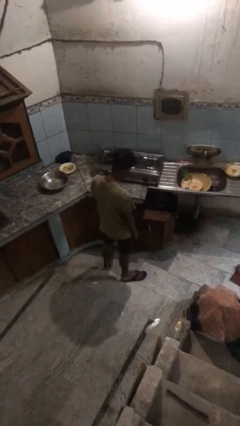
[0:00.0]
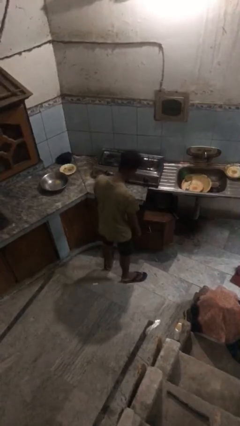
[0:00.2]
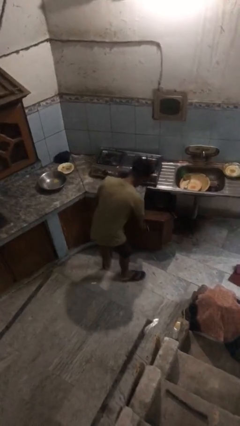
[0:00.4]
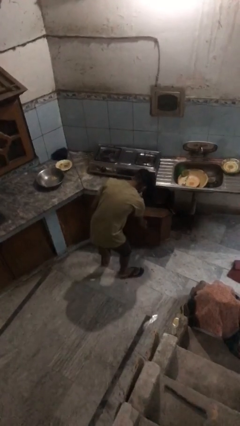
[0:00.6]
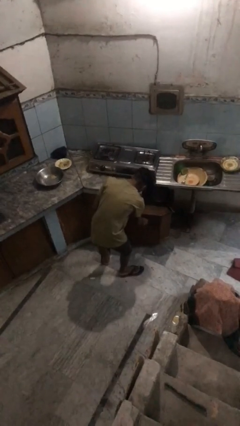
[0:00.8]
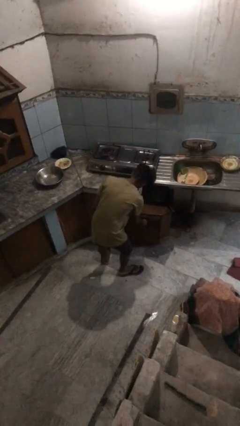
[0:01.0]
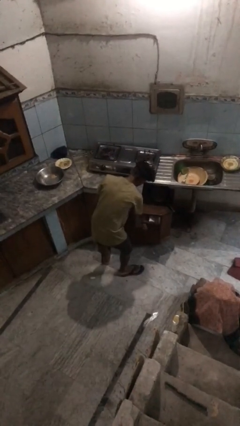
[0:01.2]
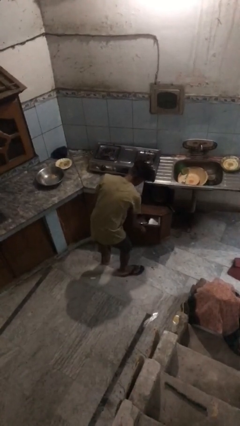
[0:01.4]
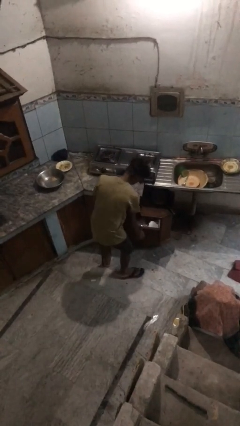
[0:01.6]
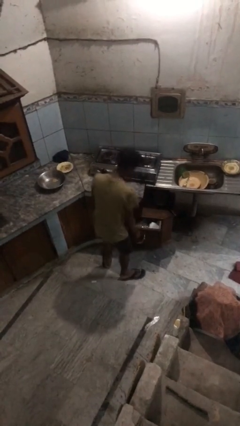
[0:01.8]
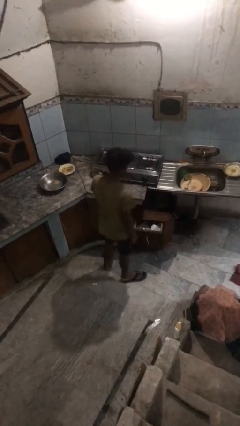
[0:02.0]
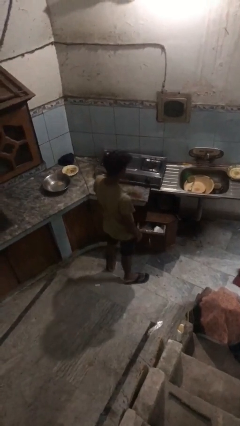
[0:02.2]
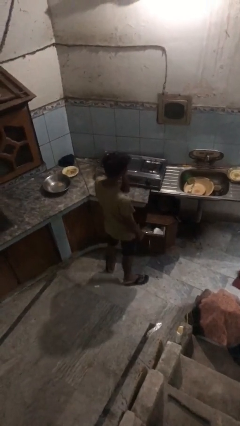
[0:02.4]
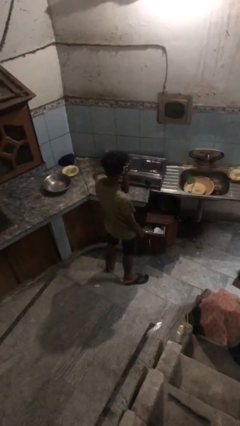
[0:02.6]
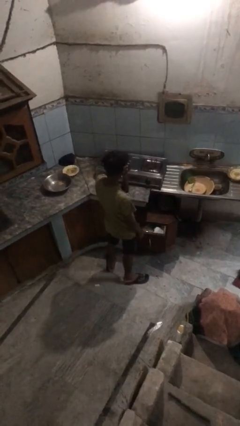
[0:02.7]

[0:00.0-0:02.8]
person opens kitchen drawer

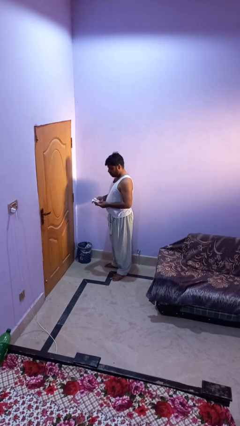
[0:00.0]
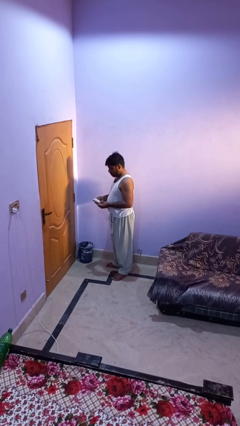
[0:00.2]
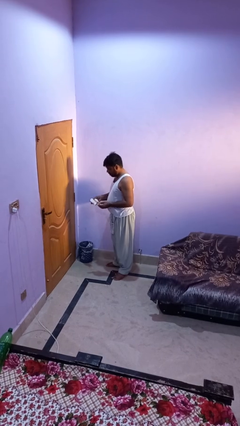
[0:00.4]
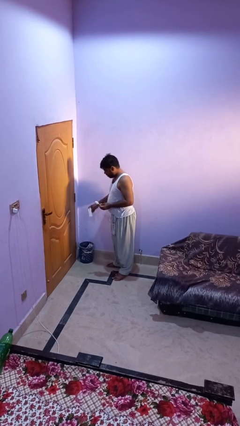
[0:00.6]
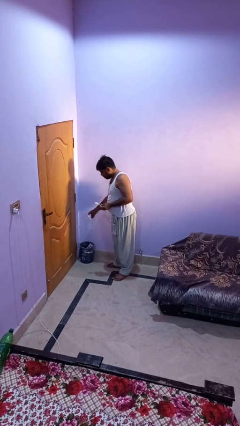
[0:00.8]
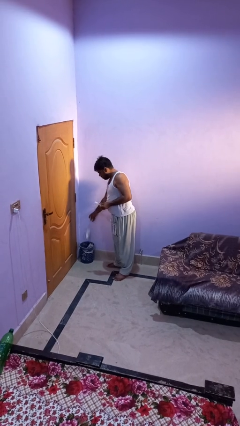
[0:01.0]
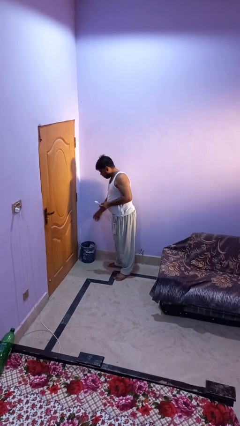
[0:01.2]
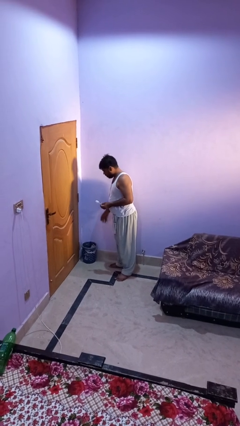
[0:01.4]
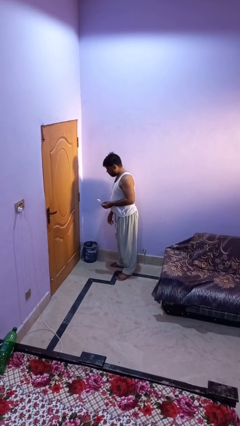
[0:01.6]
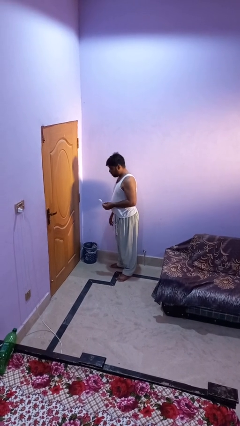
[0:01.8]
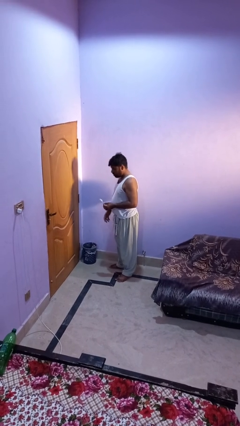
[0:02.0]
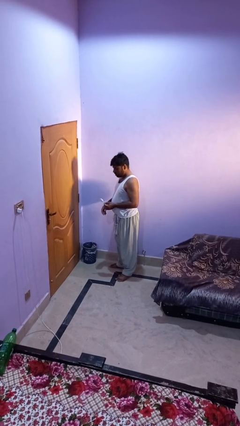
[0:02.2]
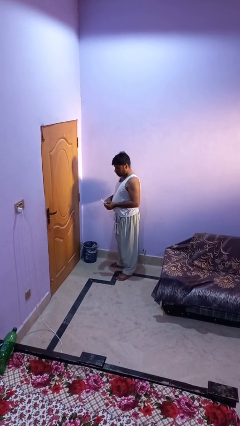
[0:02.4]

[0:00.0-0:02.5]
person discards trash

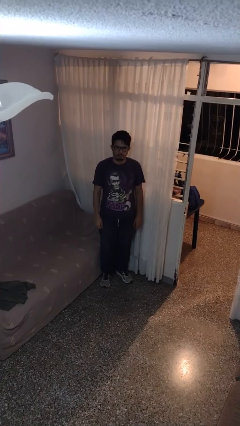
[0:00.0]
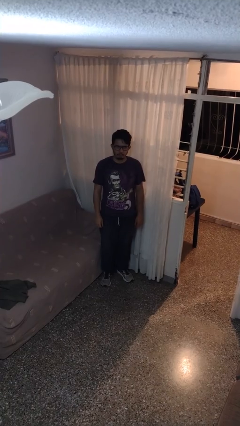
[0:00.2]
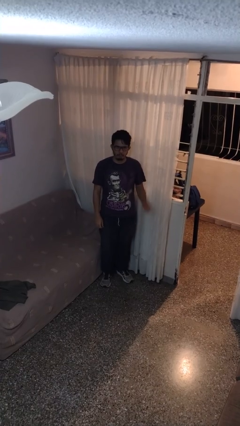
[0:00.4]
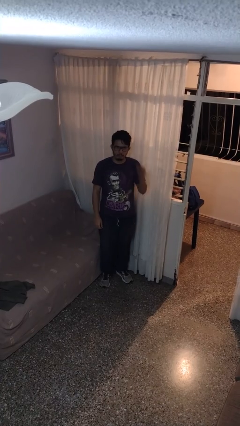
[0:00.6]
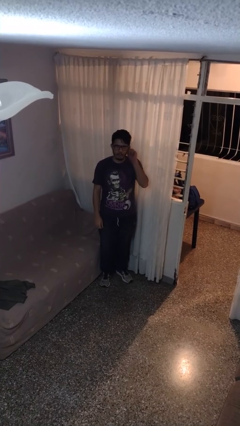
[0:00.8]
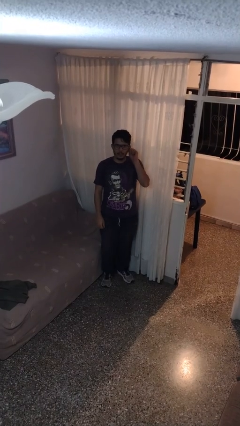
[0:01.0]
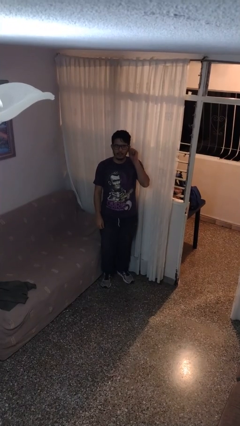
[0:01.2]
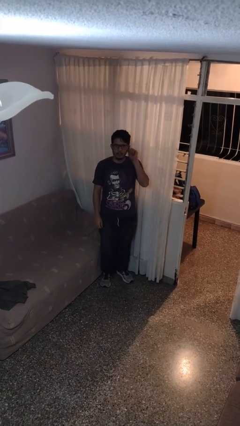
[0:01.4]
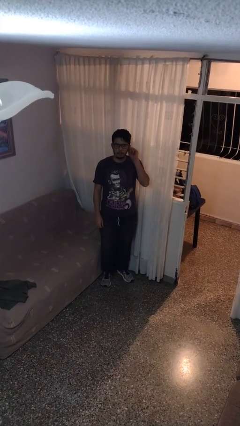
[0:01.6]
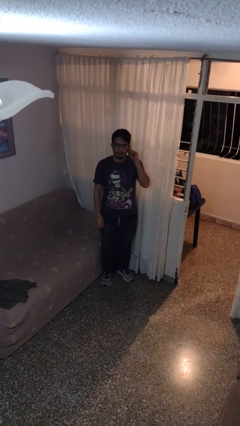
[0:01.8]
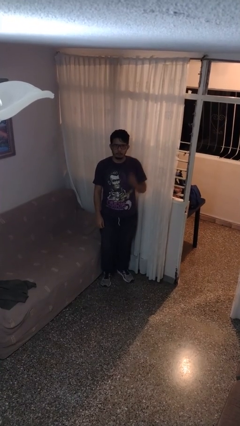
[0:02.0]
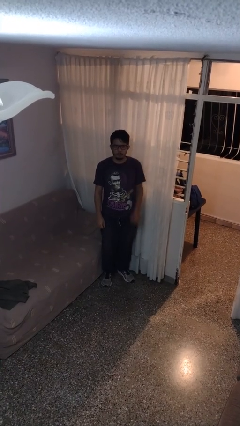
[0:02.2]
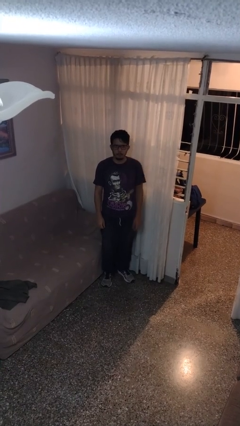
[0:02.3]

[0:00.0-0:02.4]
person touches earlobe

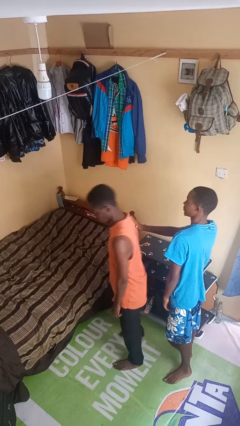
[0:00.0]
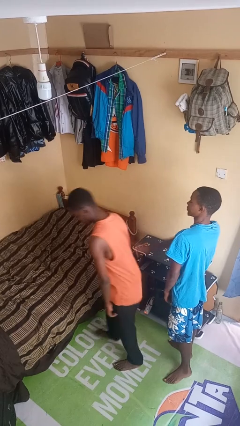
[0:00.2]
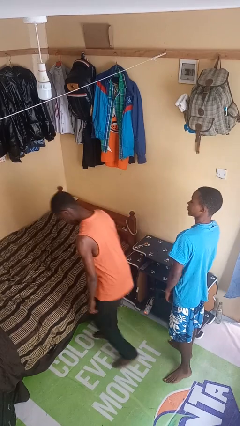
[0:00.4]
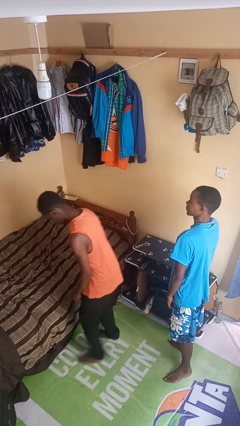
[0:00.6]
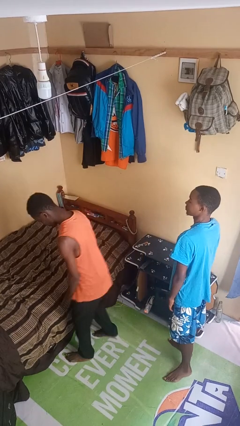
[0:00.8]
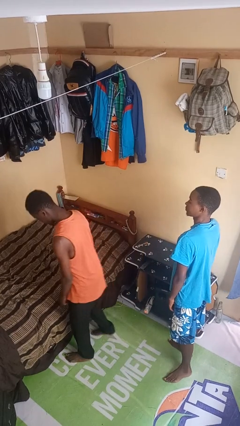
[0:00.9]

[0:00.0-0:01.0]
person shoves person

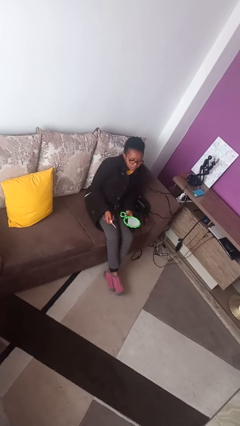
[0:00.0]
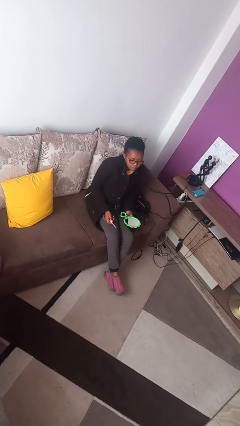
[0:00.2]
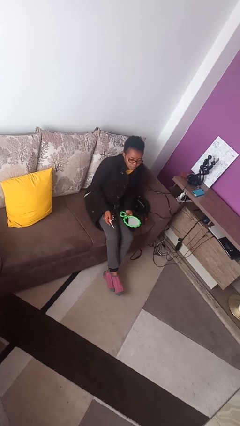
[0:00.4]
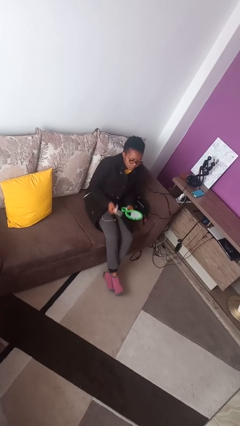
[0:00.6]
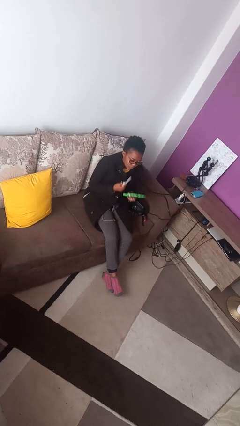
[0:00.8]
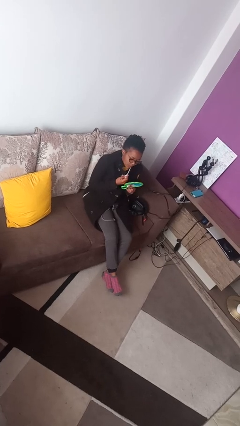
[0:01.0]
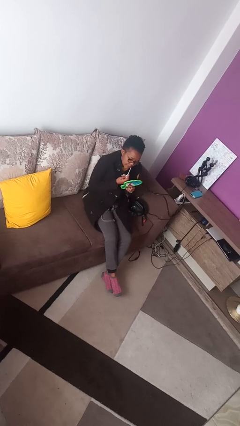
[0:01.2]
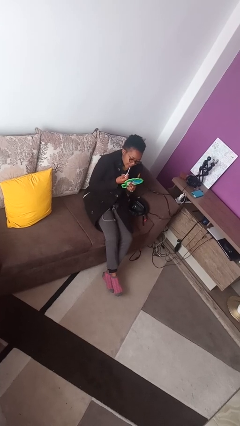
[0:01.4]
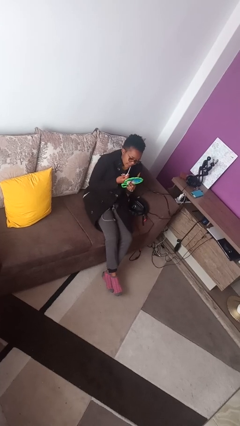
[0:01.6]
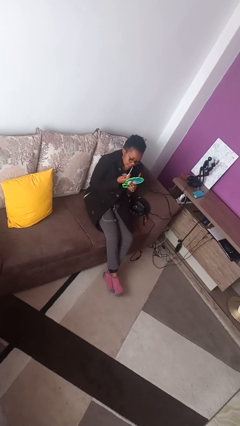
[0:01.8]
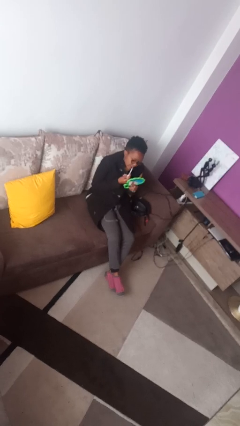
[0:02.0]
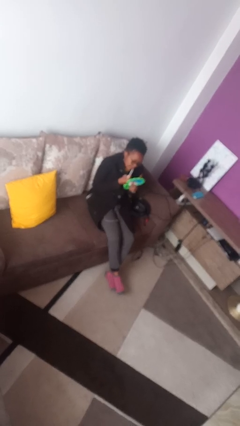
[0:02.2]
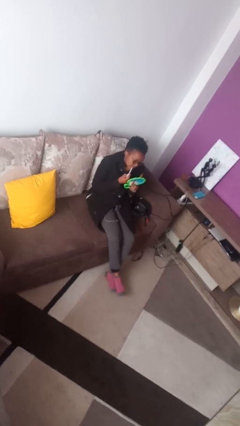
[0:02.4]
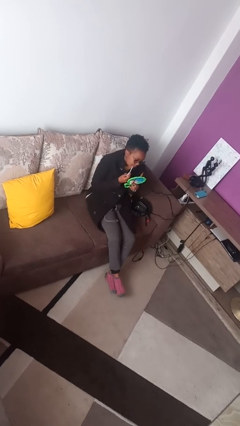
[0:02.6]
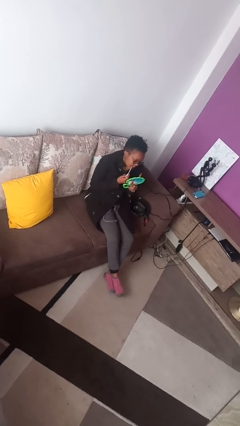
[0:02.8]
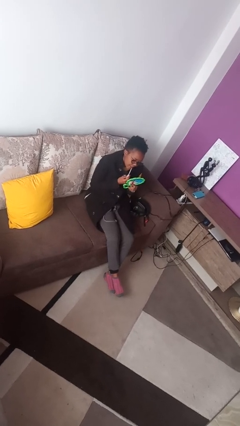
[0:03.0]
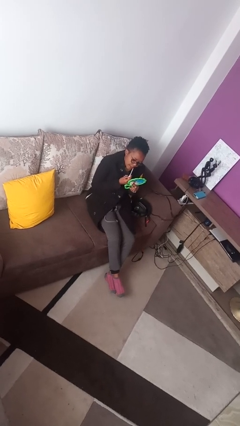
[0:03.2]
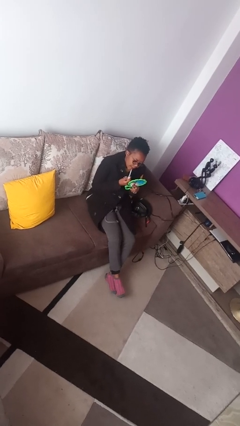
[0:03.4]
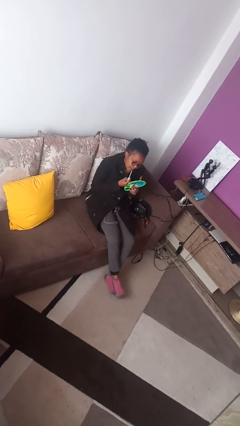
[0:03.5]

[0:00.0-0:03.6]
person applies lip makeup

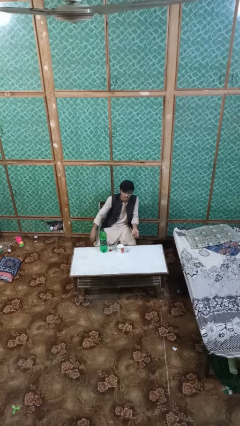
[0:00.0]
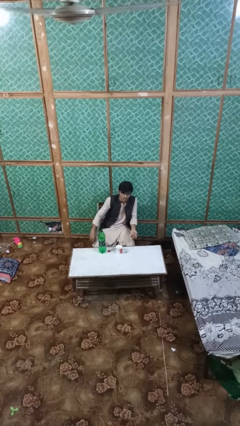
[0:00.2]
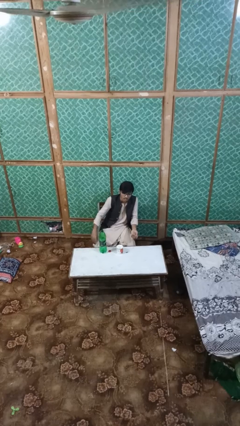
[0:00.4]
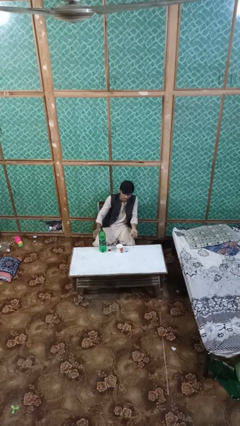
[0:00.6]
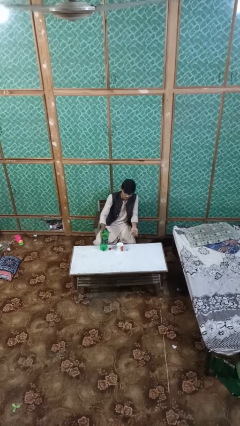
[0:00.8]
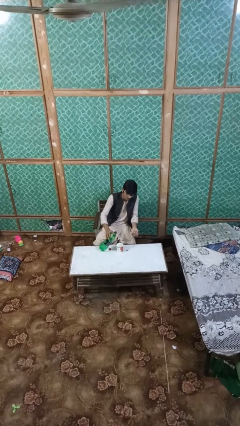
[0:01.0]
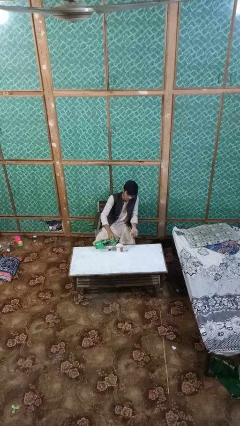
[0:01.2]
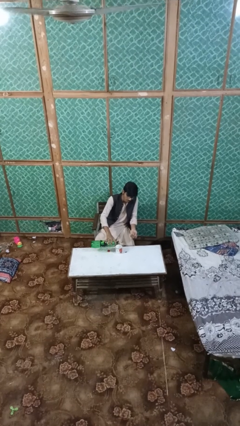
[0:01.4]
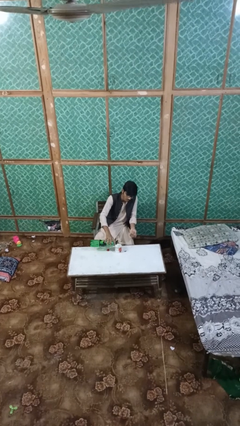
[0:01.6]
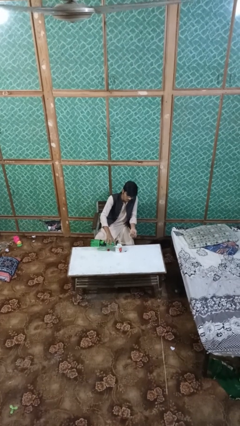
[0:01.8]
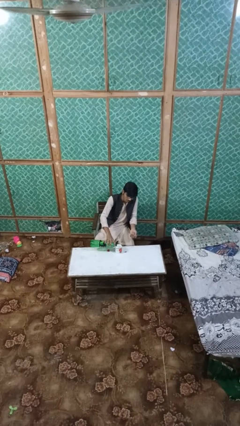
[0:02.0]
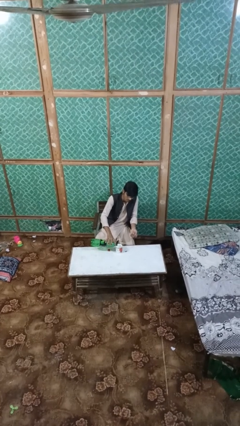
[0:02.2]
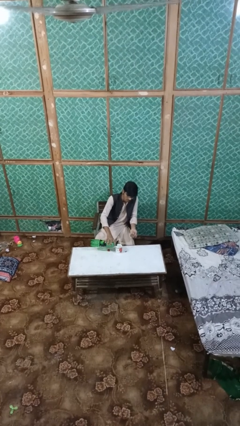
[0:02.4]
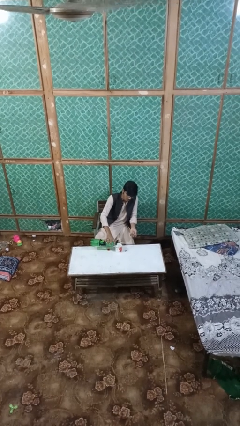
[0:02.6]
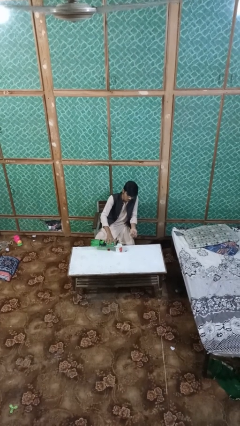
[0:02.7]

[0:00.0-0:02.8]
person pours liquid into cup

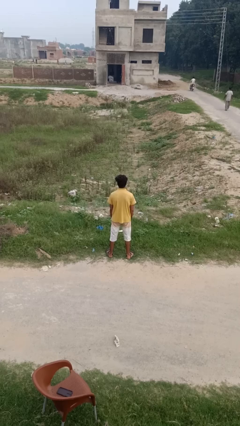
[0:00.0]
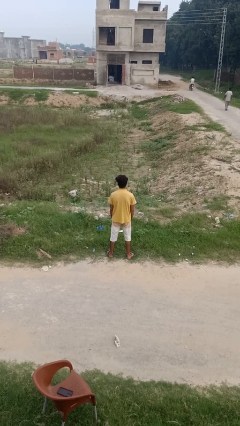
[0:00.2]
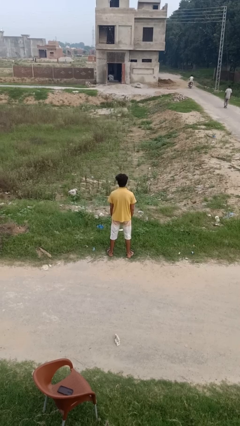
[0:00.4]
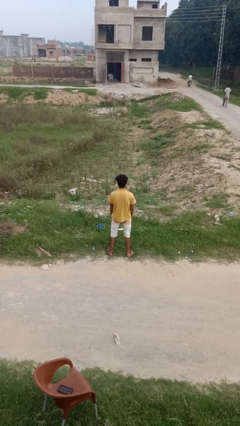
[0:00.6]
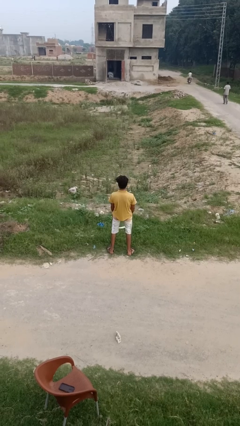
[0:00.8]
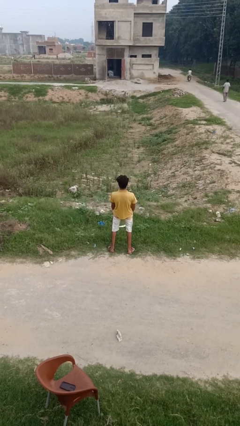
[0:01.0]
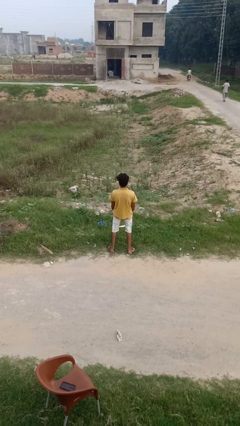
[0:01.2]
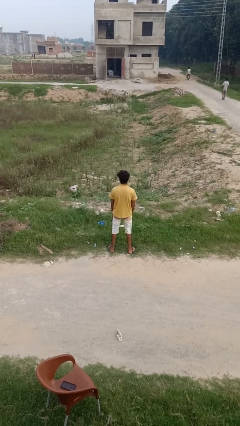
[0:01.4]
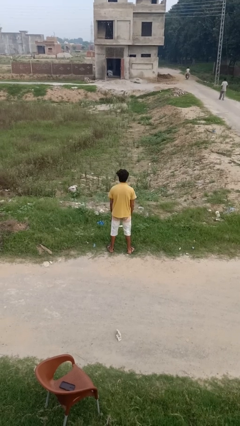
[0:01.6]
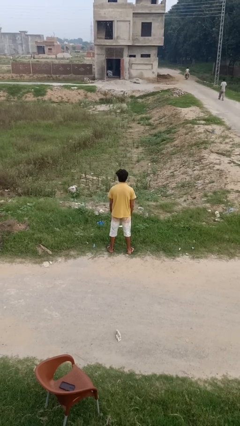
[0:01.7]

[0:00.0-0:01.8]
person wiggles hips

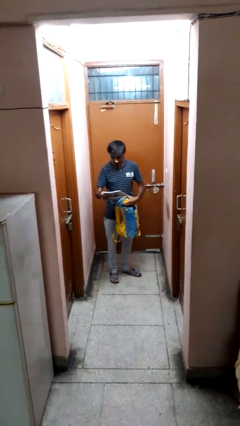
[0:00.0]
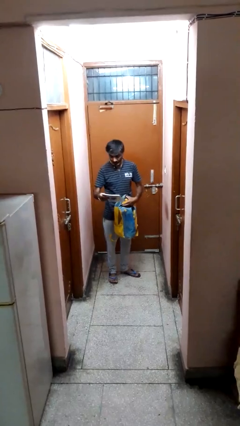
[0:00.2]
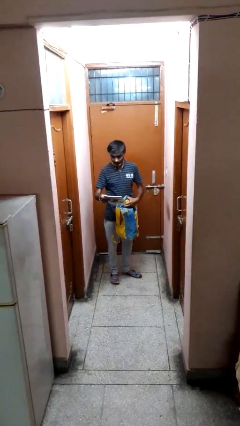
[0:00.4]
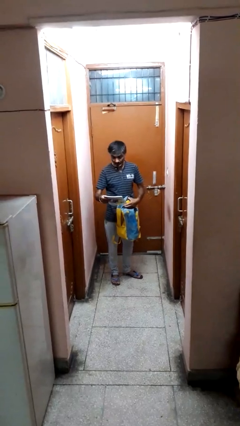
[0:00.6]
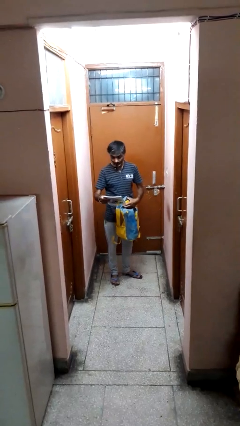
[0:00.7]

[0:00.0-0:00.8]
person takes object from backpack
